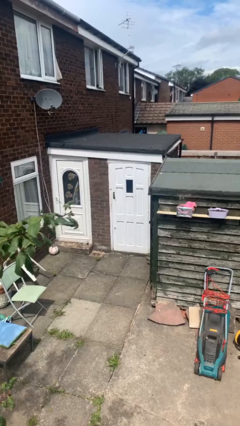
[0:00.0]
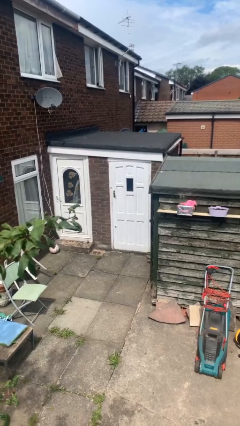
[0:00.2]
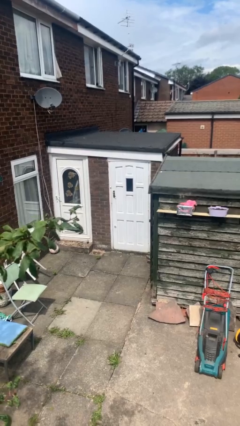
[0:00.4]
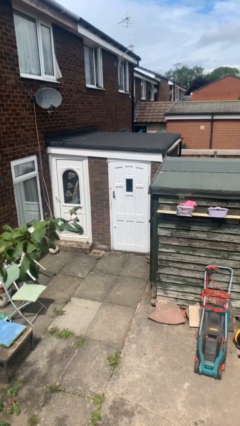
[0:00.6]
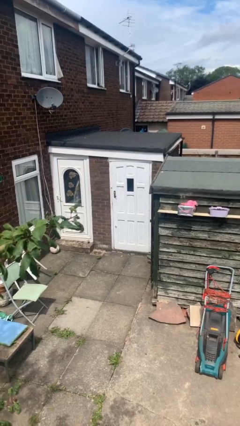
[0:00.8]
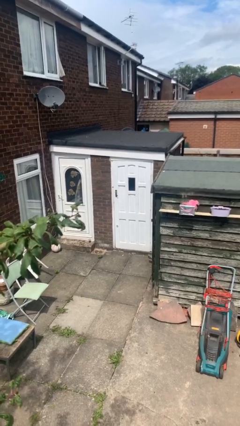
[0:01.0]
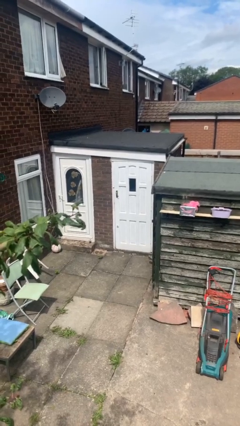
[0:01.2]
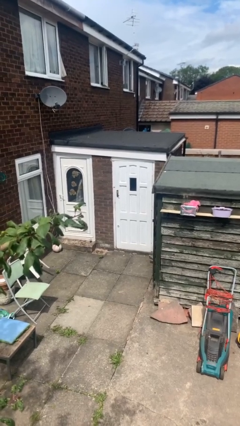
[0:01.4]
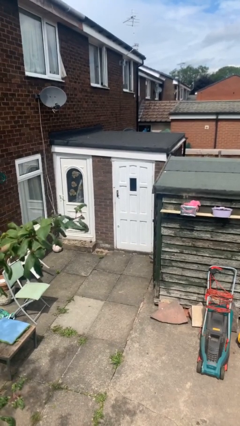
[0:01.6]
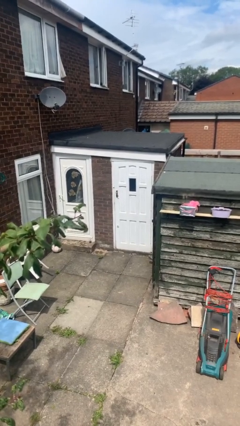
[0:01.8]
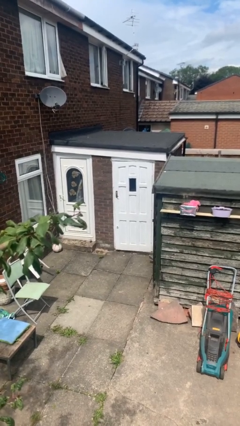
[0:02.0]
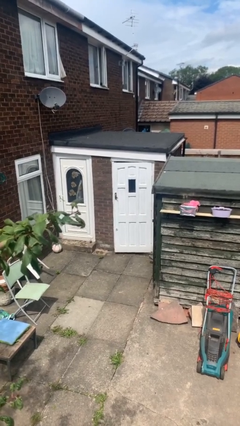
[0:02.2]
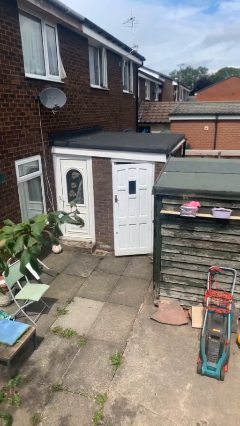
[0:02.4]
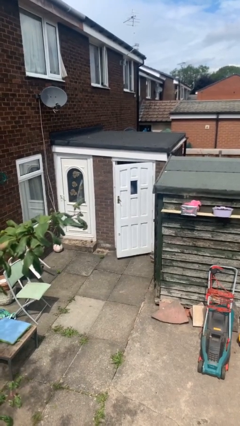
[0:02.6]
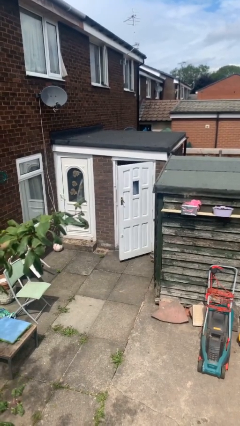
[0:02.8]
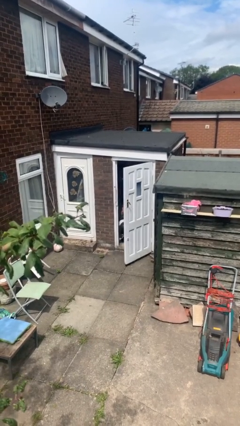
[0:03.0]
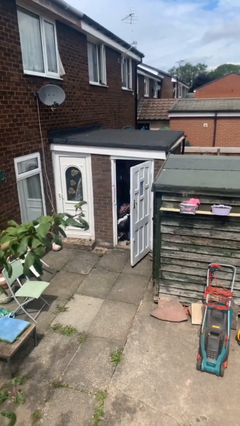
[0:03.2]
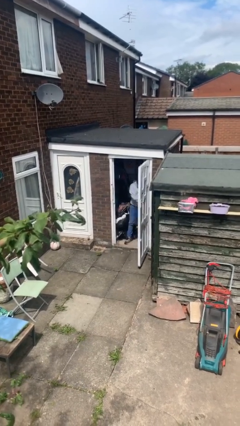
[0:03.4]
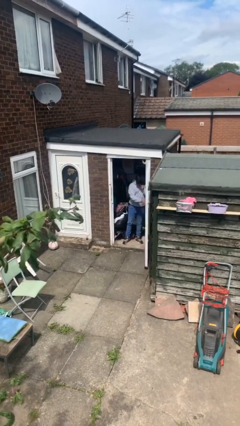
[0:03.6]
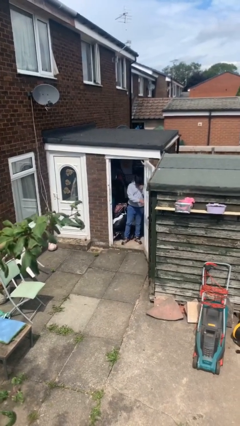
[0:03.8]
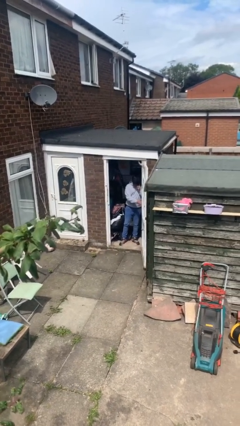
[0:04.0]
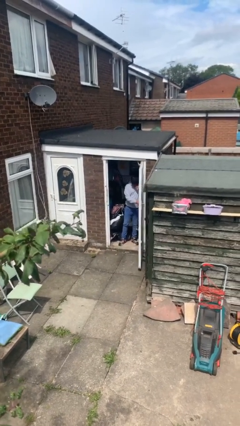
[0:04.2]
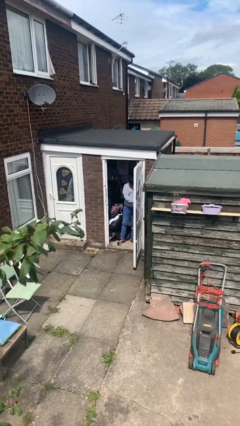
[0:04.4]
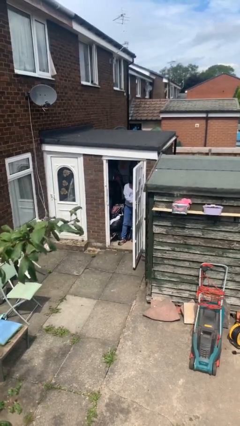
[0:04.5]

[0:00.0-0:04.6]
person opens facility door

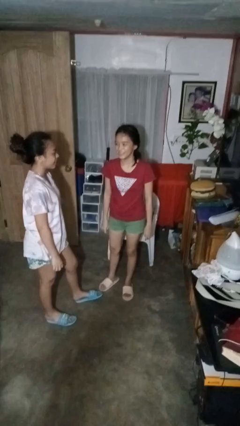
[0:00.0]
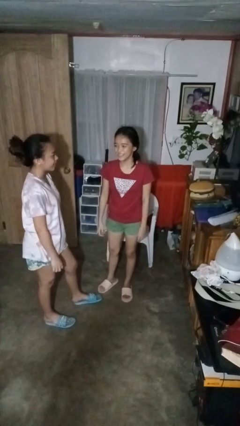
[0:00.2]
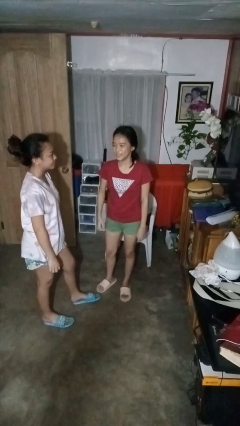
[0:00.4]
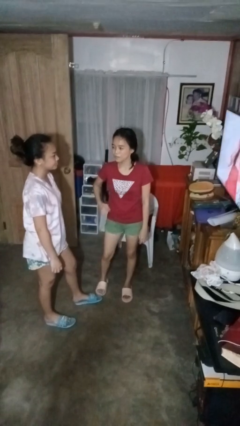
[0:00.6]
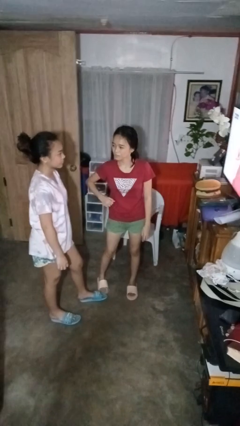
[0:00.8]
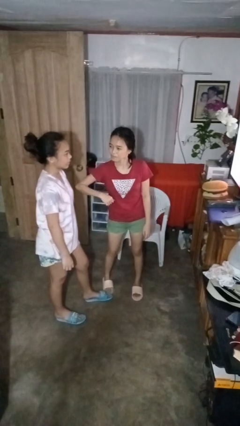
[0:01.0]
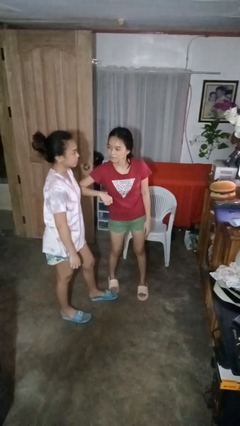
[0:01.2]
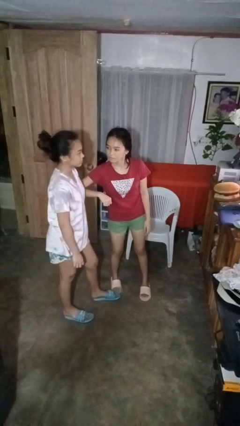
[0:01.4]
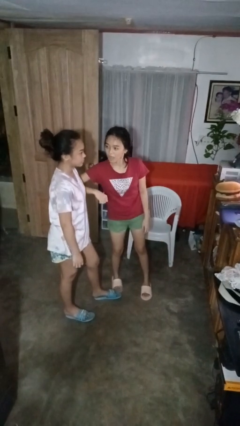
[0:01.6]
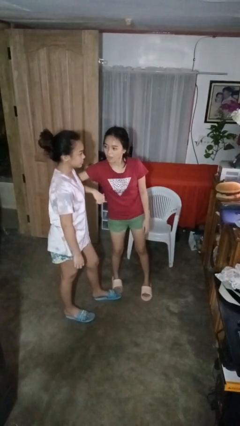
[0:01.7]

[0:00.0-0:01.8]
person nudges person with elbow

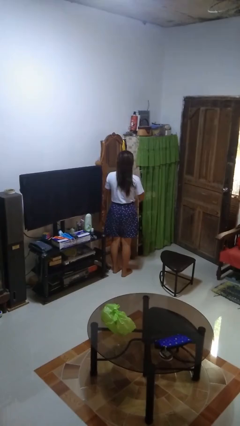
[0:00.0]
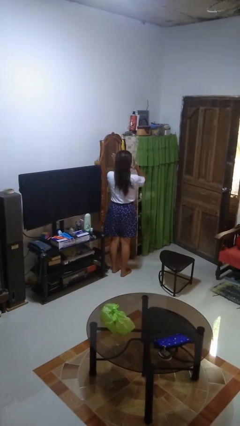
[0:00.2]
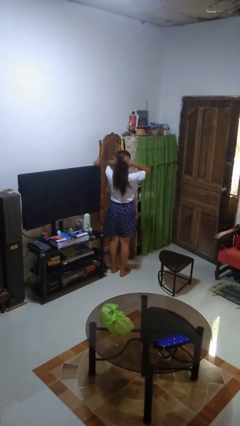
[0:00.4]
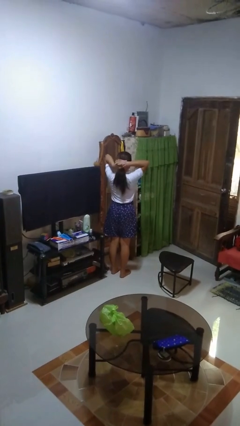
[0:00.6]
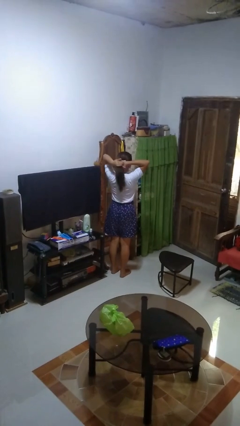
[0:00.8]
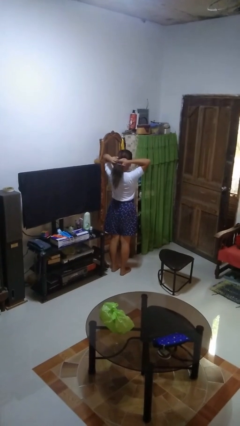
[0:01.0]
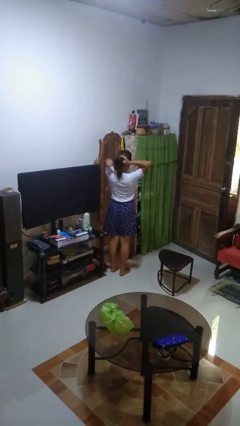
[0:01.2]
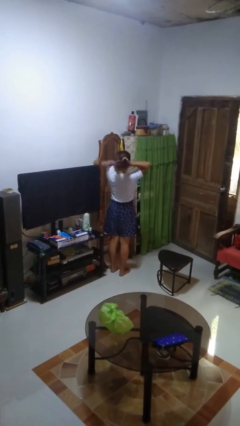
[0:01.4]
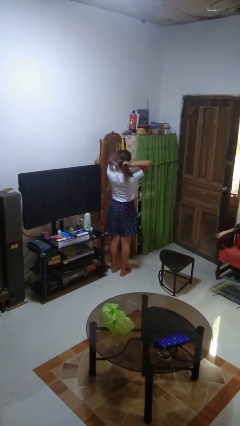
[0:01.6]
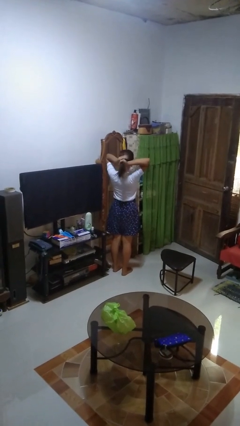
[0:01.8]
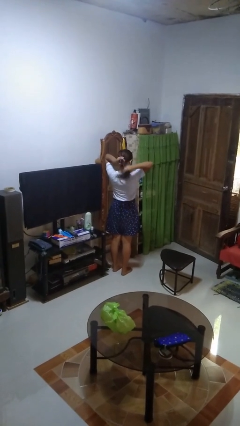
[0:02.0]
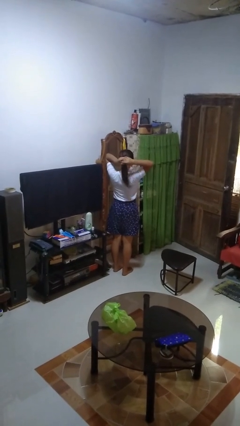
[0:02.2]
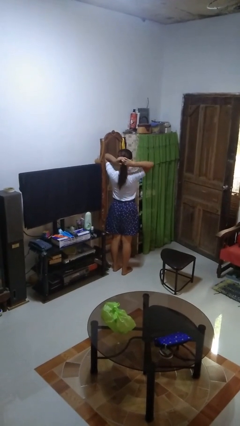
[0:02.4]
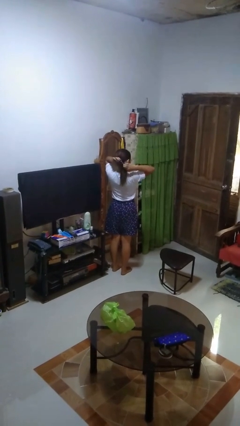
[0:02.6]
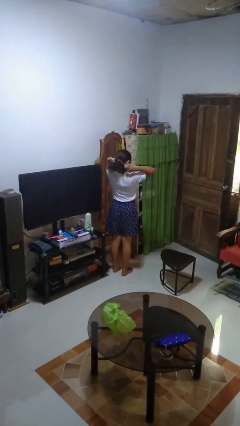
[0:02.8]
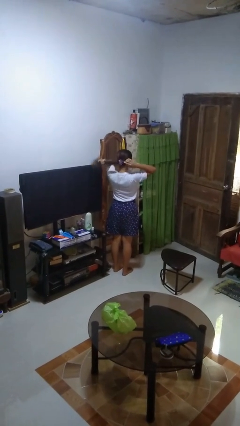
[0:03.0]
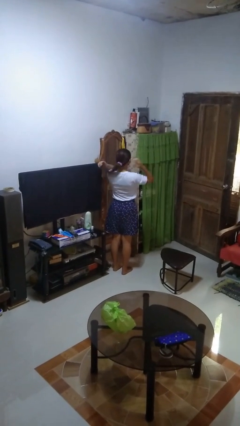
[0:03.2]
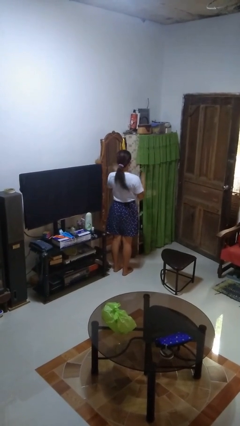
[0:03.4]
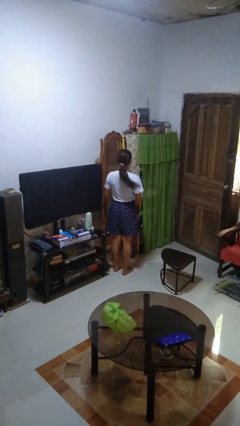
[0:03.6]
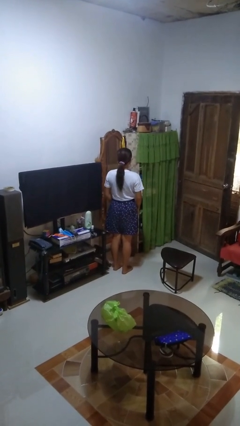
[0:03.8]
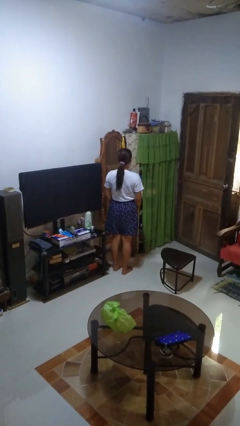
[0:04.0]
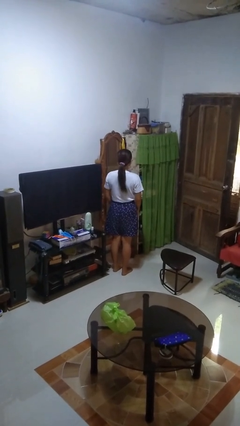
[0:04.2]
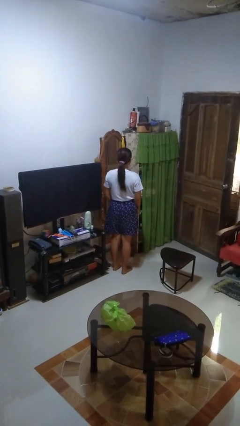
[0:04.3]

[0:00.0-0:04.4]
person puts hair in ponytail

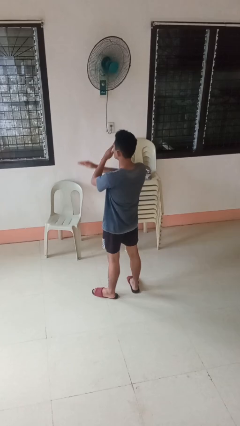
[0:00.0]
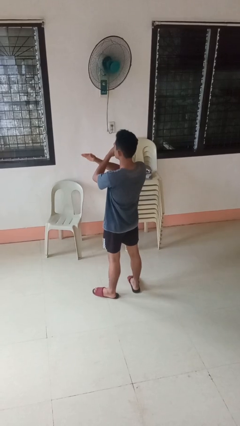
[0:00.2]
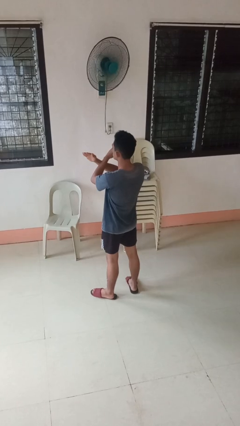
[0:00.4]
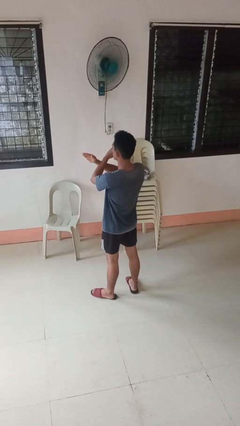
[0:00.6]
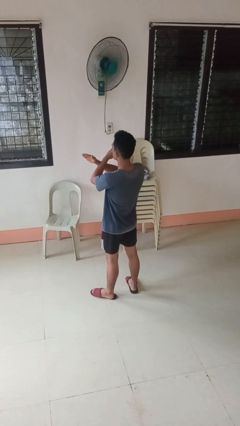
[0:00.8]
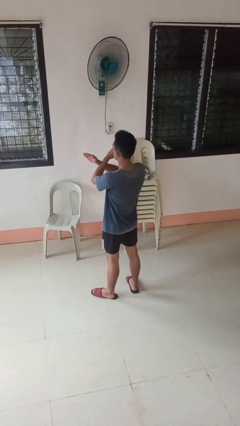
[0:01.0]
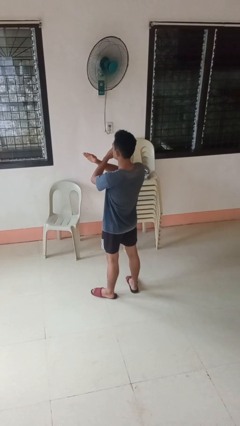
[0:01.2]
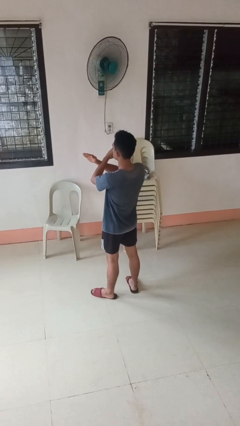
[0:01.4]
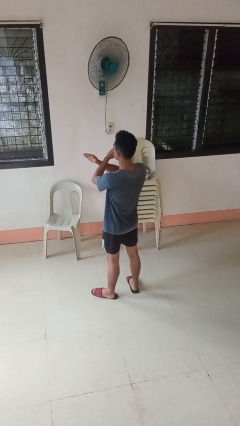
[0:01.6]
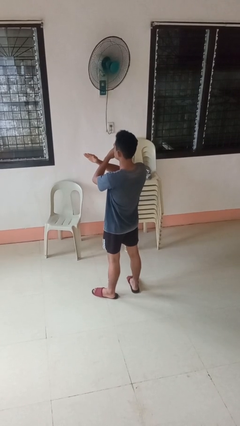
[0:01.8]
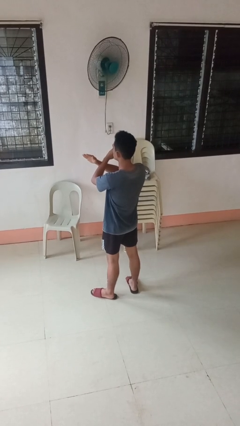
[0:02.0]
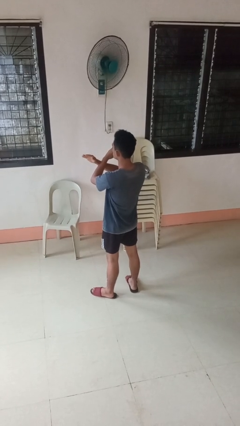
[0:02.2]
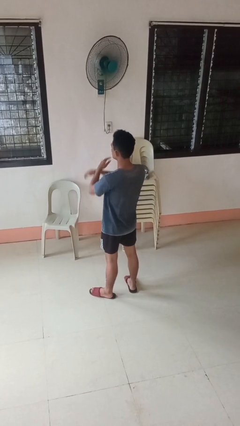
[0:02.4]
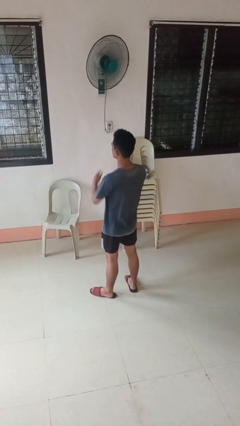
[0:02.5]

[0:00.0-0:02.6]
person gestures arms x

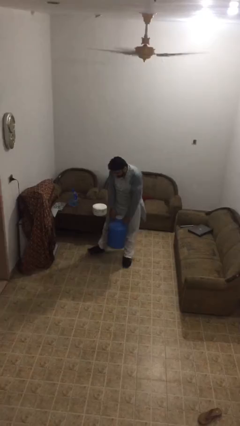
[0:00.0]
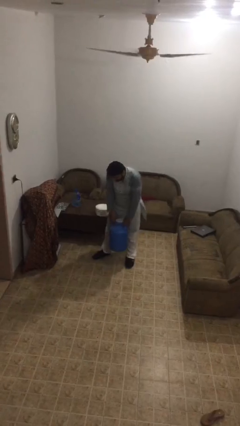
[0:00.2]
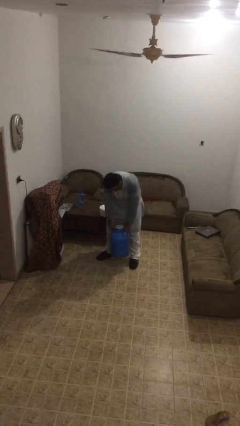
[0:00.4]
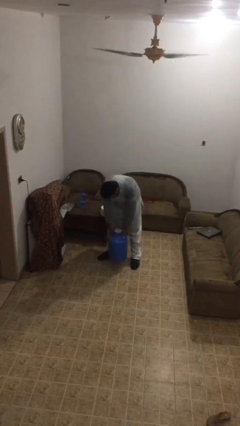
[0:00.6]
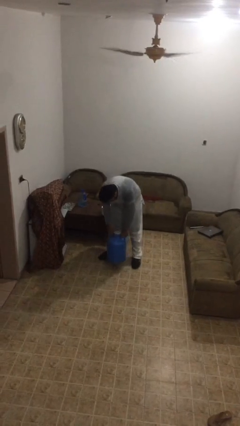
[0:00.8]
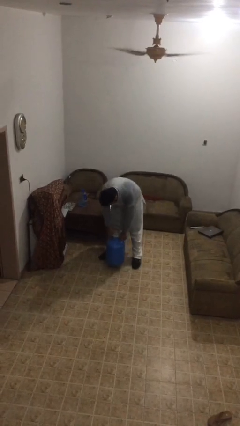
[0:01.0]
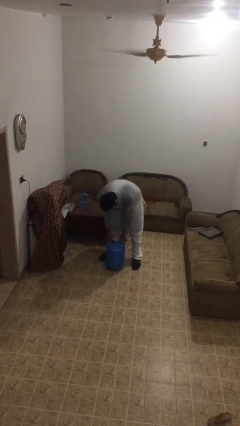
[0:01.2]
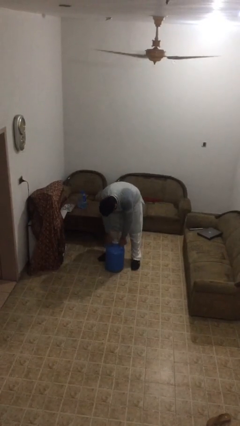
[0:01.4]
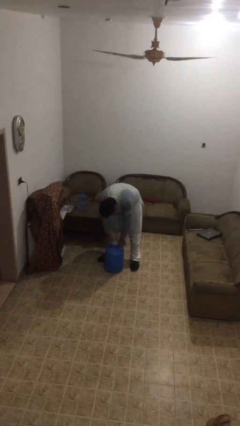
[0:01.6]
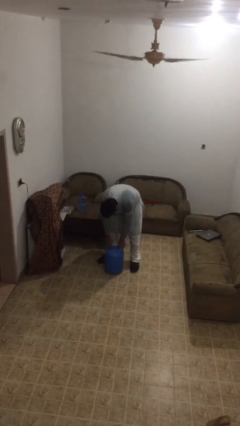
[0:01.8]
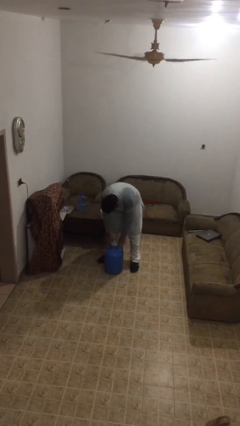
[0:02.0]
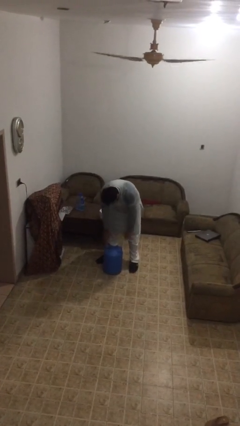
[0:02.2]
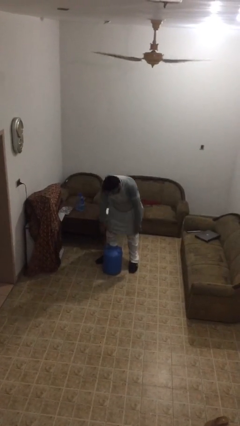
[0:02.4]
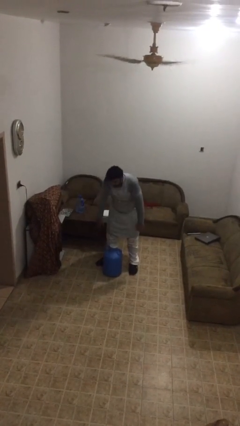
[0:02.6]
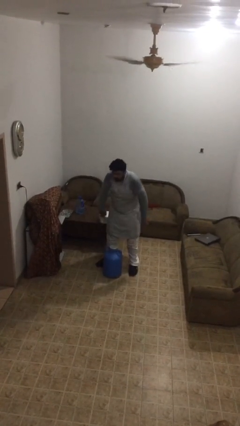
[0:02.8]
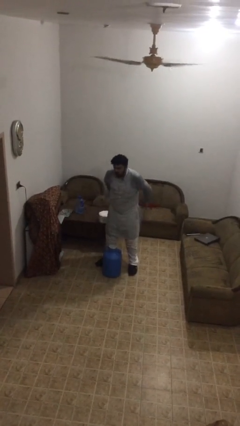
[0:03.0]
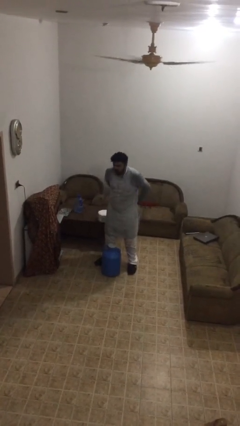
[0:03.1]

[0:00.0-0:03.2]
person puts down object on floor

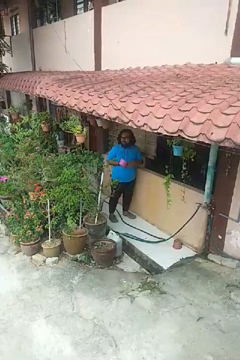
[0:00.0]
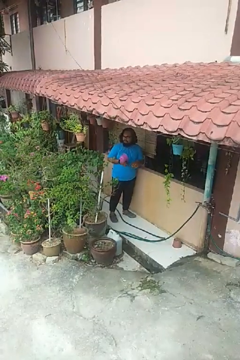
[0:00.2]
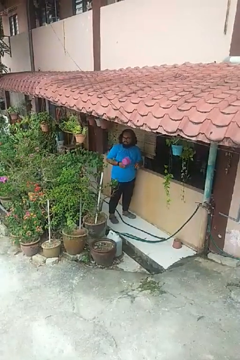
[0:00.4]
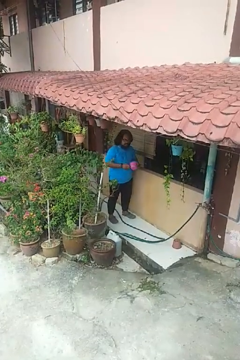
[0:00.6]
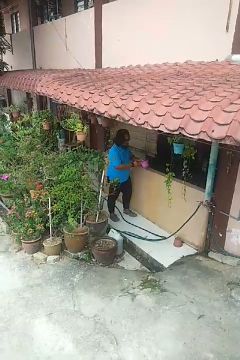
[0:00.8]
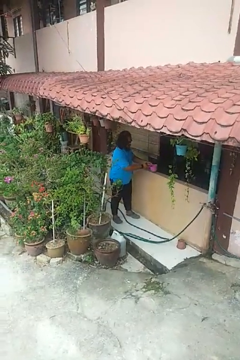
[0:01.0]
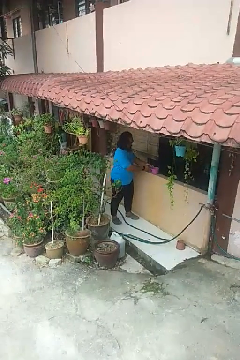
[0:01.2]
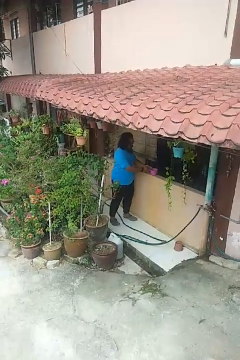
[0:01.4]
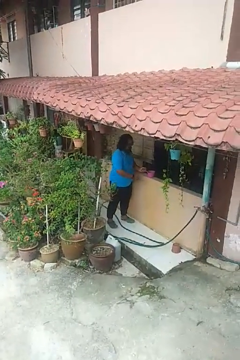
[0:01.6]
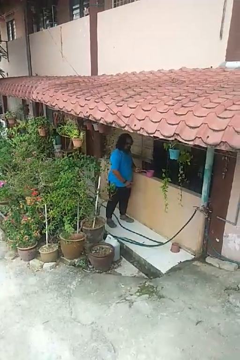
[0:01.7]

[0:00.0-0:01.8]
person puts down object on countertop
